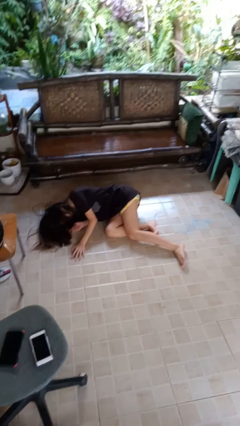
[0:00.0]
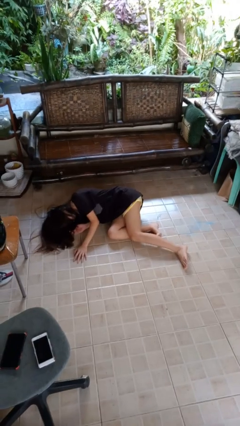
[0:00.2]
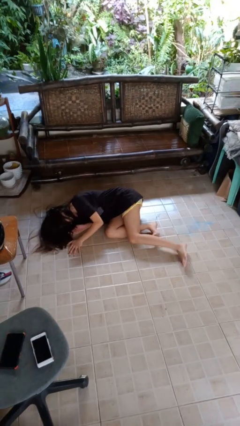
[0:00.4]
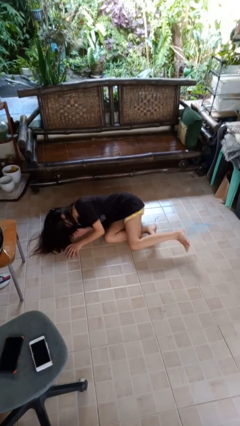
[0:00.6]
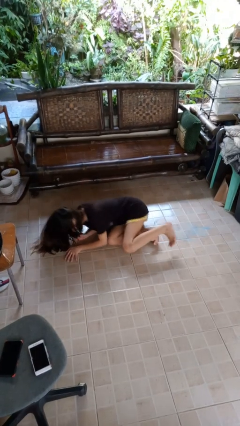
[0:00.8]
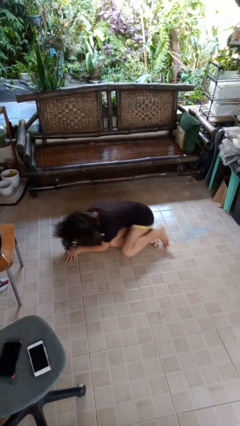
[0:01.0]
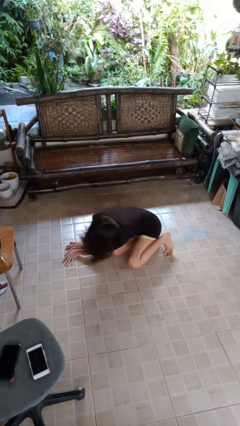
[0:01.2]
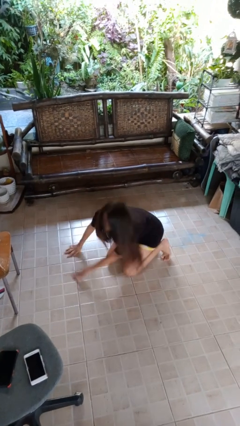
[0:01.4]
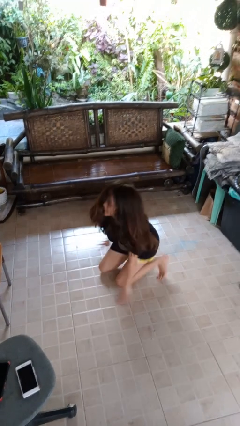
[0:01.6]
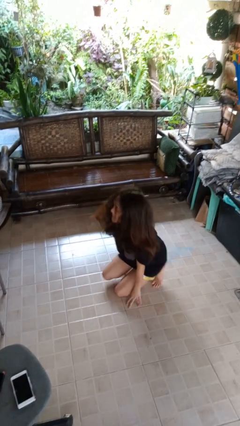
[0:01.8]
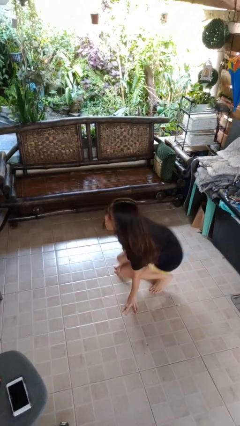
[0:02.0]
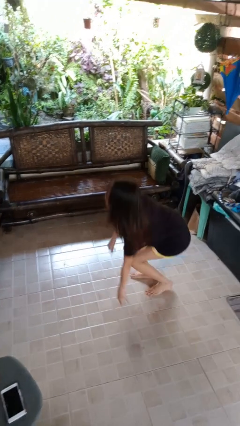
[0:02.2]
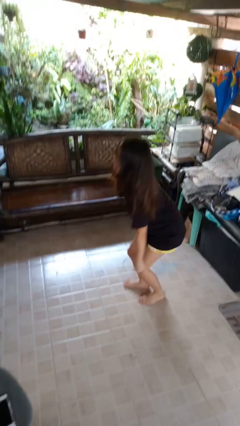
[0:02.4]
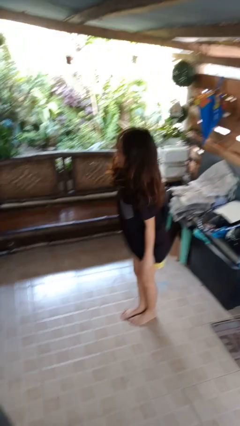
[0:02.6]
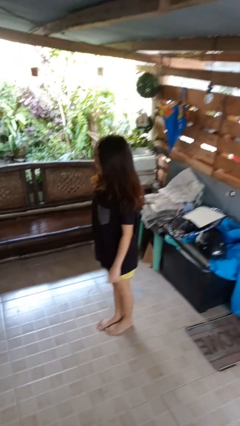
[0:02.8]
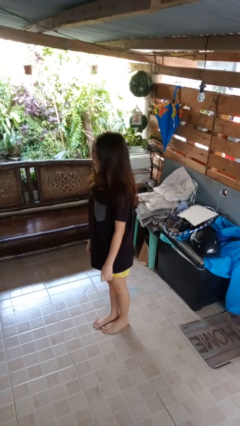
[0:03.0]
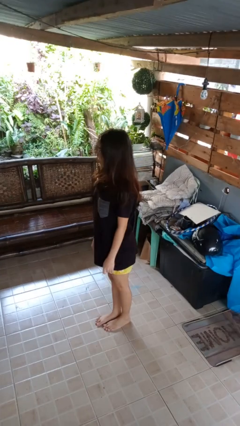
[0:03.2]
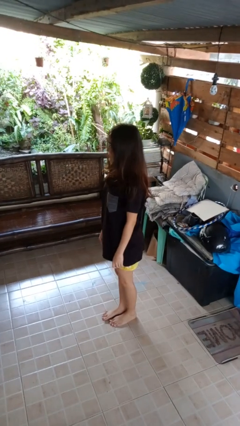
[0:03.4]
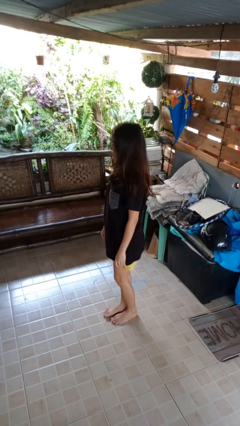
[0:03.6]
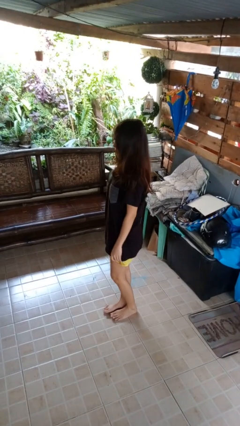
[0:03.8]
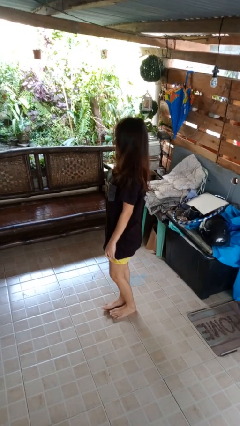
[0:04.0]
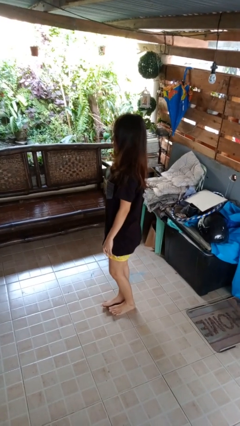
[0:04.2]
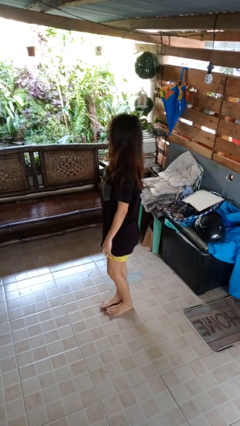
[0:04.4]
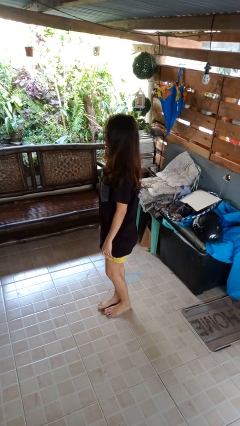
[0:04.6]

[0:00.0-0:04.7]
person stands up from floor

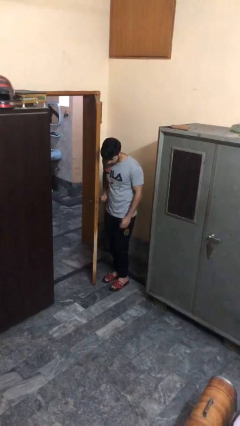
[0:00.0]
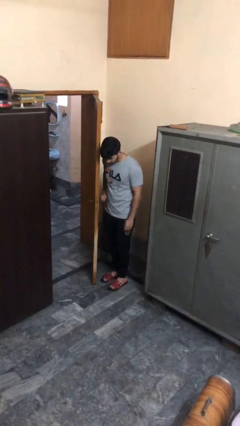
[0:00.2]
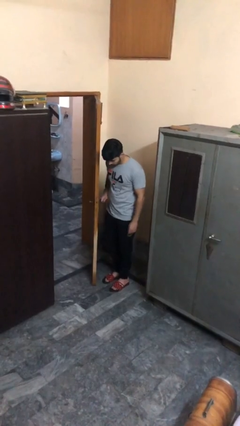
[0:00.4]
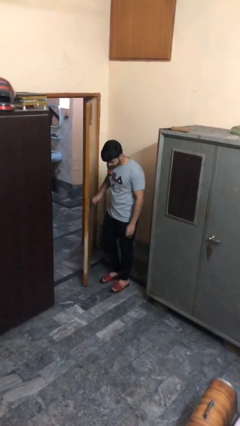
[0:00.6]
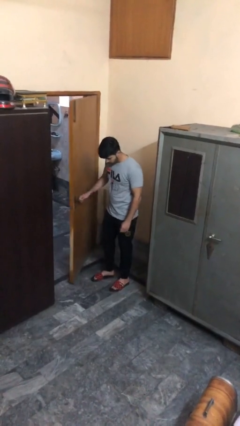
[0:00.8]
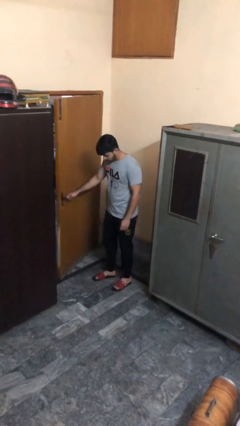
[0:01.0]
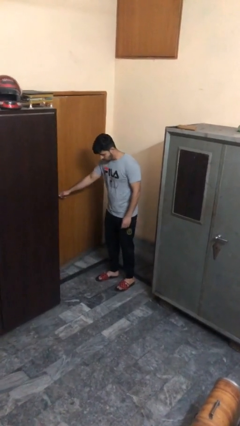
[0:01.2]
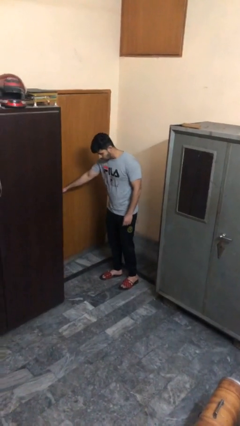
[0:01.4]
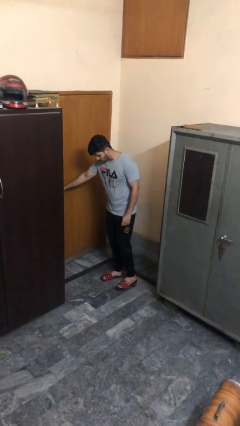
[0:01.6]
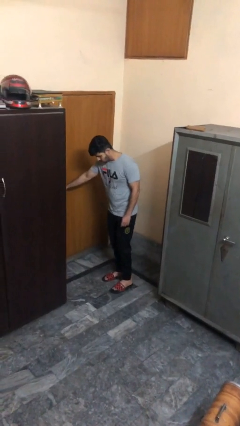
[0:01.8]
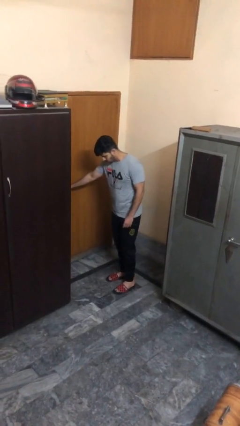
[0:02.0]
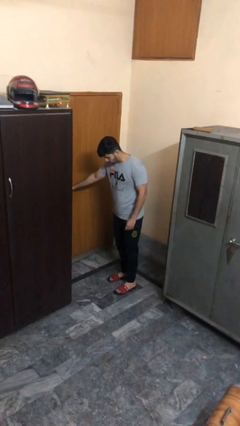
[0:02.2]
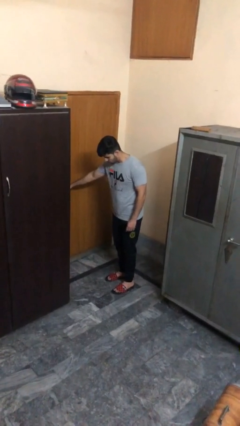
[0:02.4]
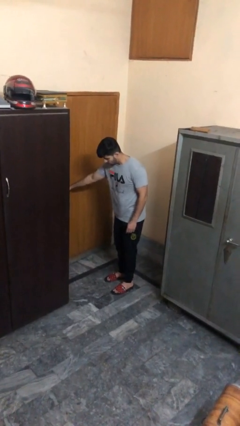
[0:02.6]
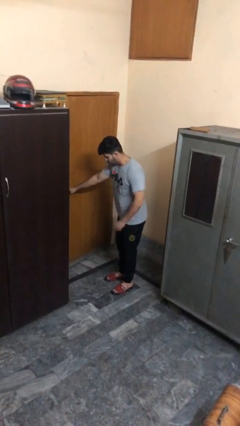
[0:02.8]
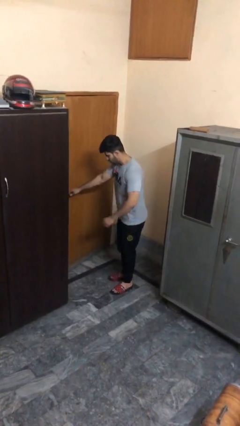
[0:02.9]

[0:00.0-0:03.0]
person closes facility door

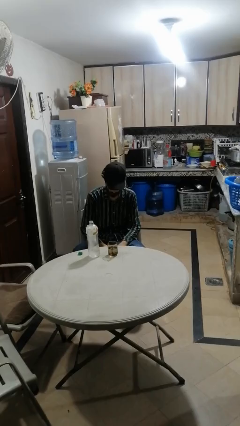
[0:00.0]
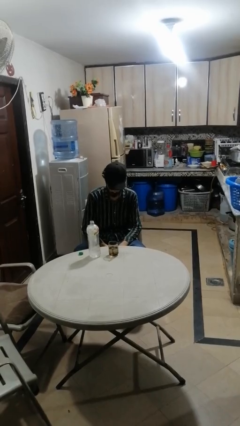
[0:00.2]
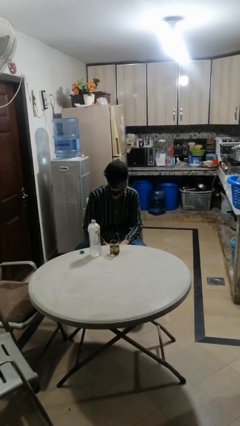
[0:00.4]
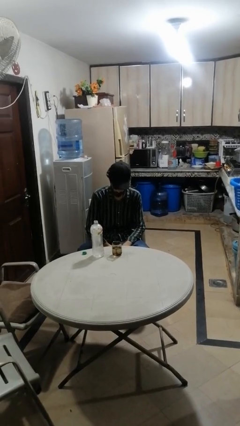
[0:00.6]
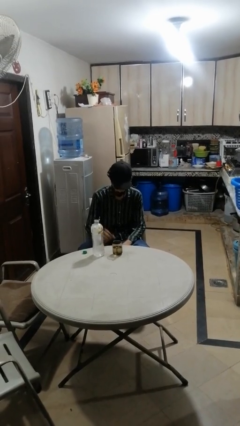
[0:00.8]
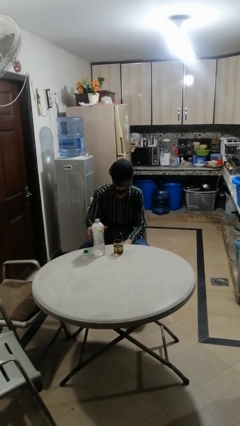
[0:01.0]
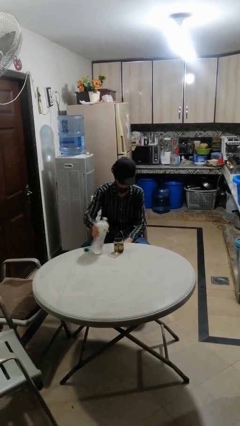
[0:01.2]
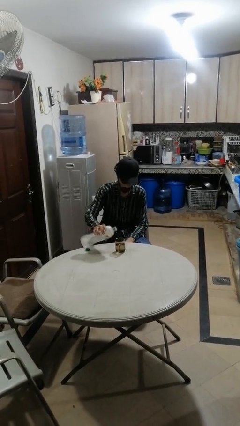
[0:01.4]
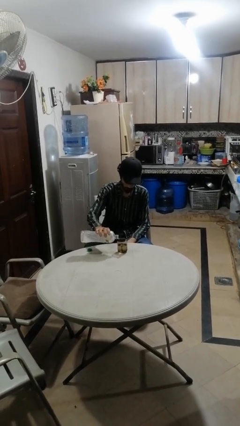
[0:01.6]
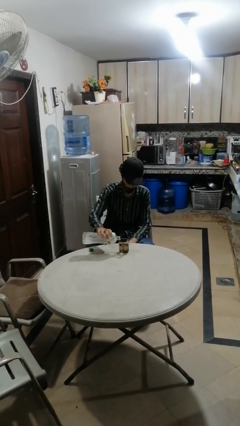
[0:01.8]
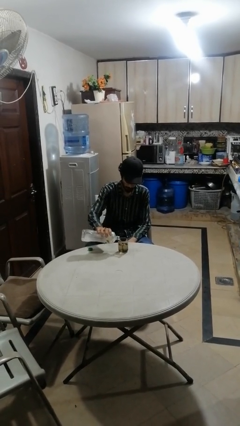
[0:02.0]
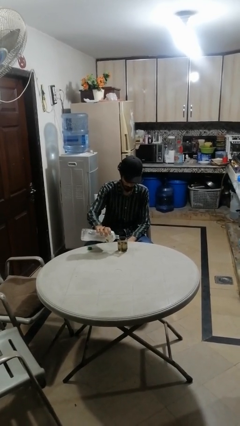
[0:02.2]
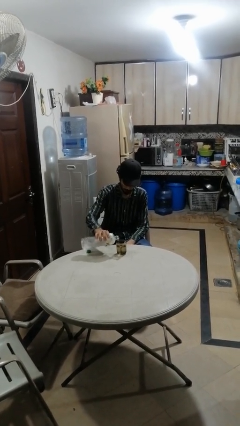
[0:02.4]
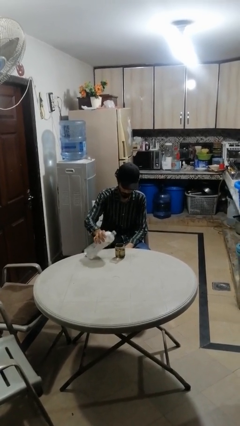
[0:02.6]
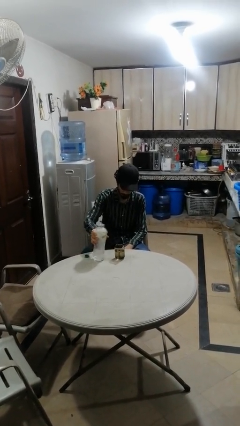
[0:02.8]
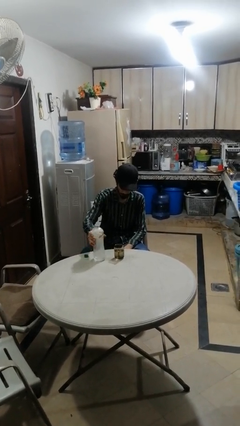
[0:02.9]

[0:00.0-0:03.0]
person pours liquid into cup

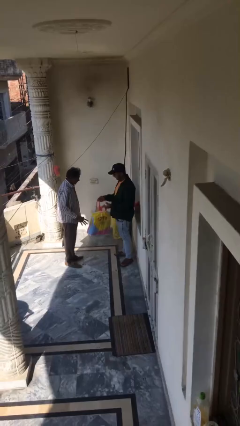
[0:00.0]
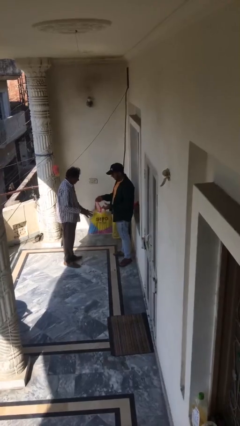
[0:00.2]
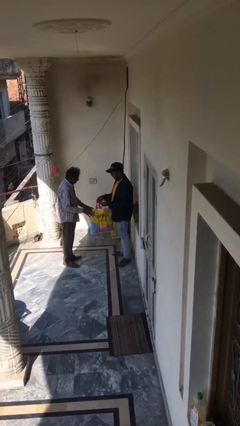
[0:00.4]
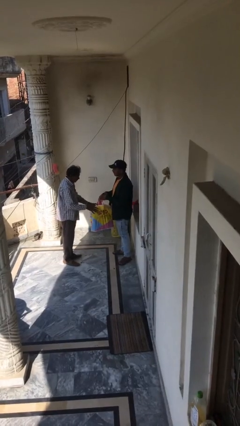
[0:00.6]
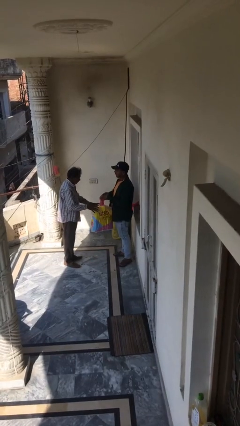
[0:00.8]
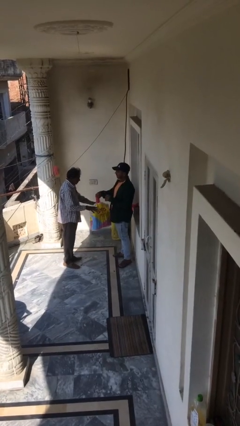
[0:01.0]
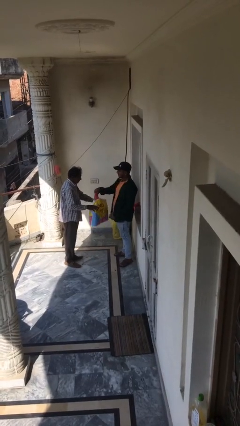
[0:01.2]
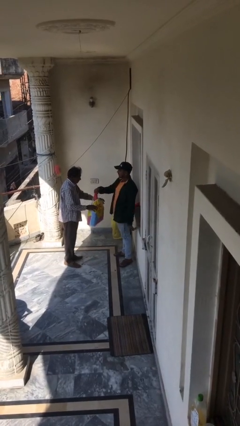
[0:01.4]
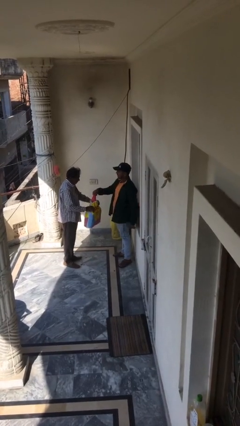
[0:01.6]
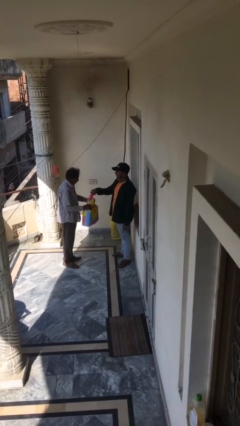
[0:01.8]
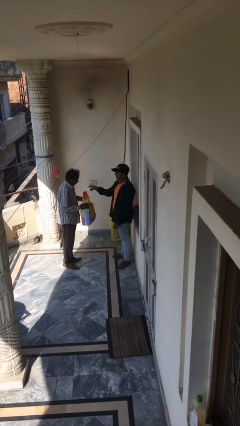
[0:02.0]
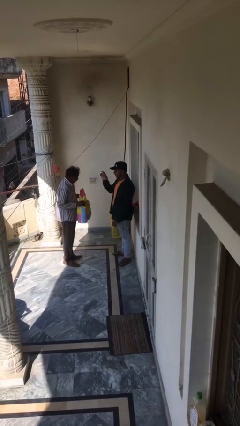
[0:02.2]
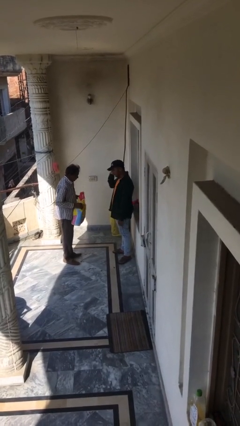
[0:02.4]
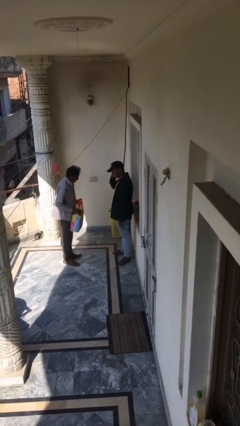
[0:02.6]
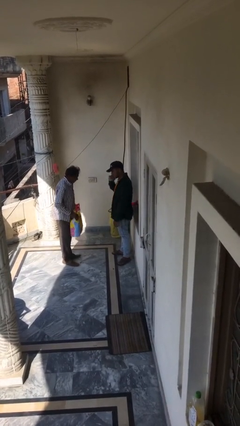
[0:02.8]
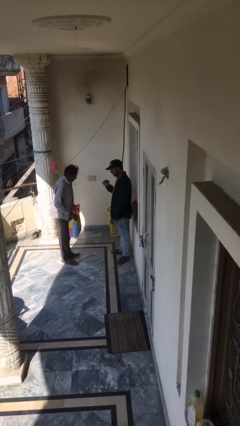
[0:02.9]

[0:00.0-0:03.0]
person transfers object to person

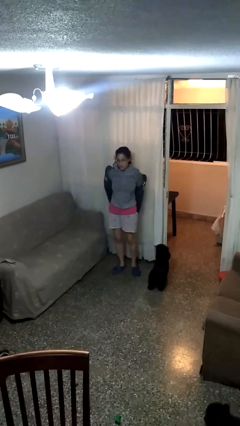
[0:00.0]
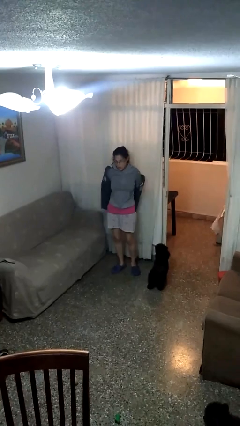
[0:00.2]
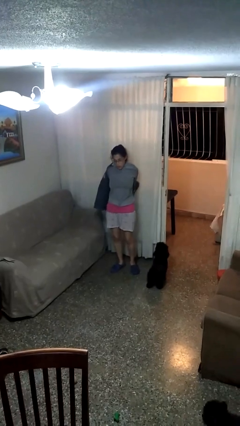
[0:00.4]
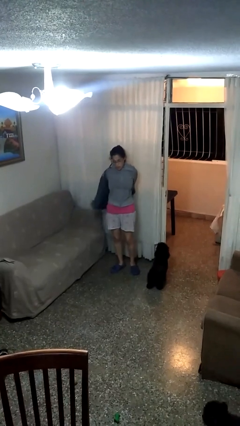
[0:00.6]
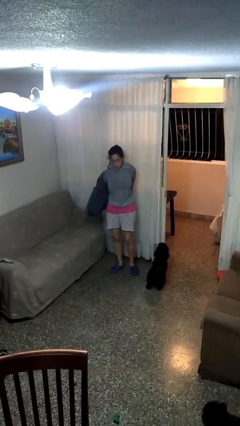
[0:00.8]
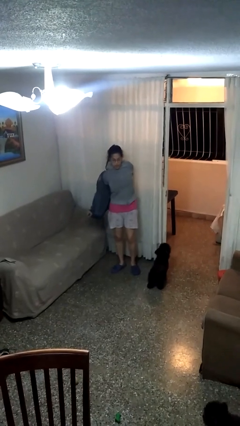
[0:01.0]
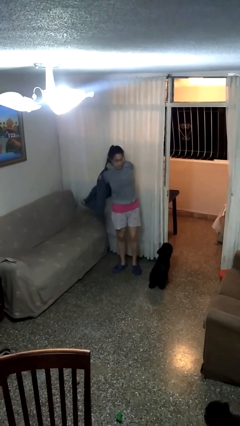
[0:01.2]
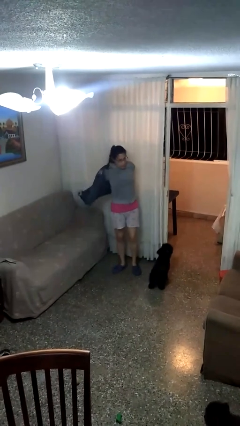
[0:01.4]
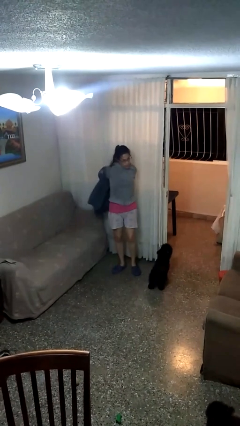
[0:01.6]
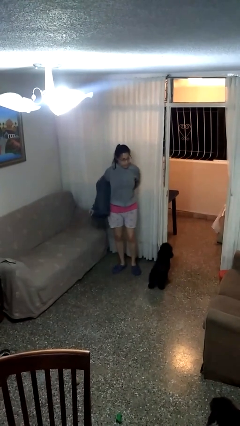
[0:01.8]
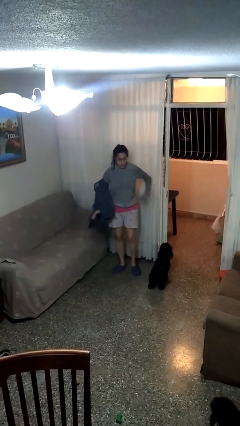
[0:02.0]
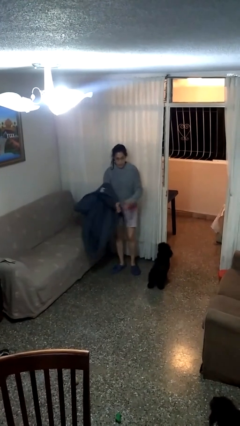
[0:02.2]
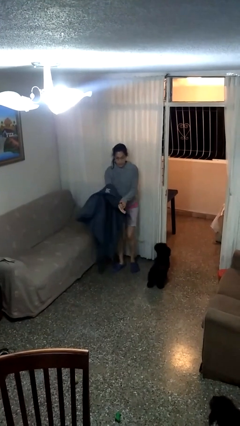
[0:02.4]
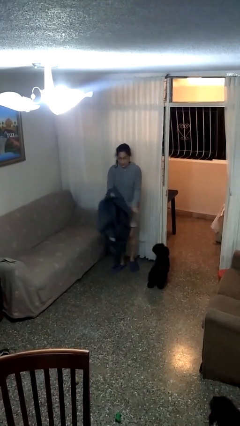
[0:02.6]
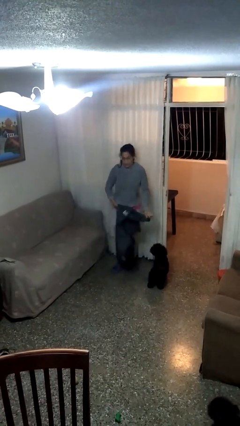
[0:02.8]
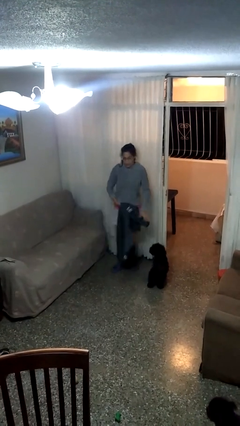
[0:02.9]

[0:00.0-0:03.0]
person takes off jacket

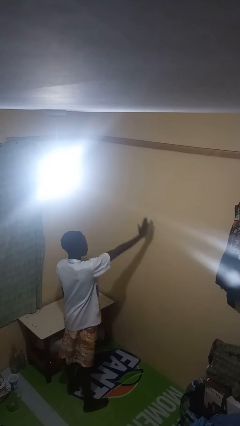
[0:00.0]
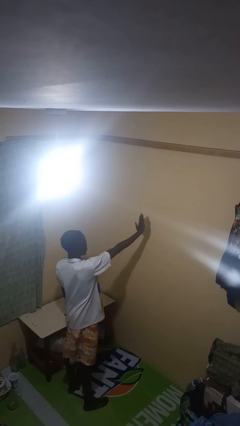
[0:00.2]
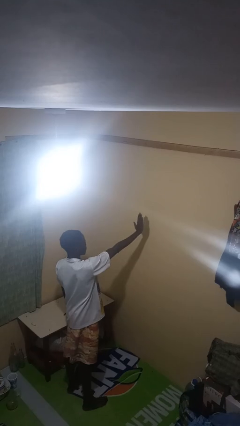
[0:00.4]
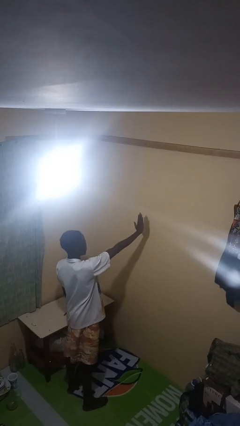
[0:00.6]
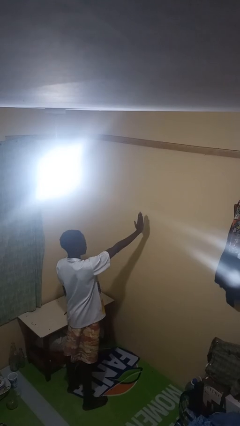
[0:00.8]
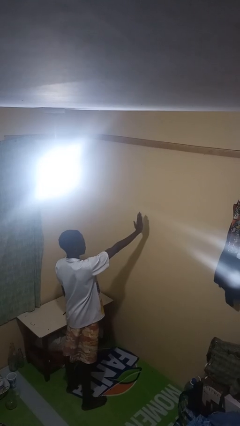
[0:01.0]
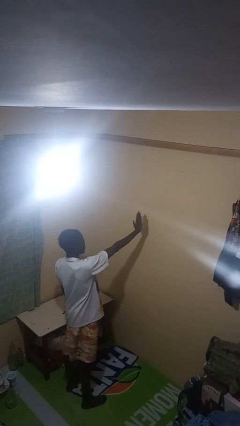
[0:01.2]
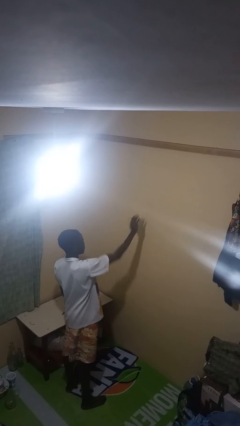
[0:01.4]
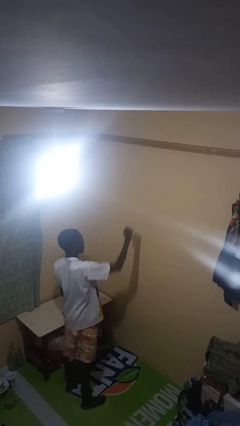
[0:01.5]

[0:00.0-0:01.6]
person gestures stop
